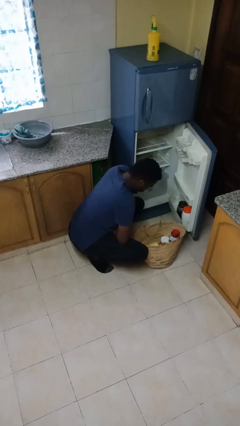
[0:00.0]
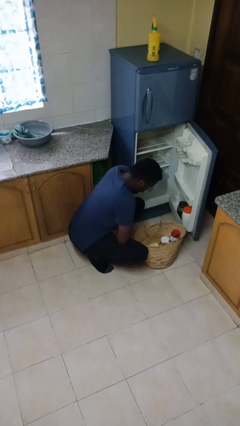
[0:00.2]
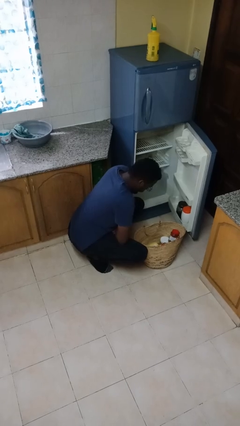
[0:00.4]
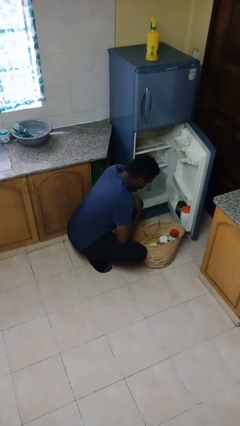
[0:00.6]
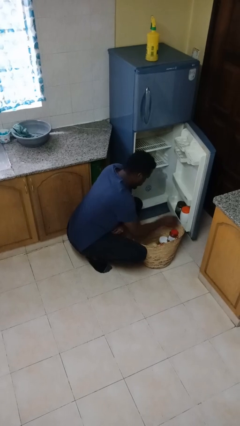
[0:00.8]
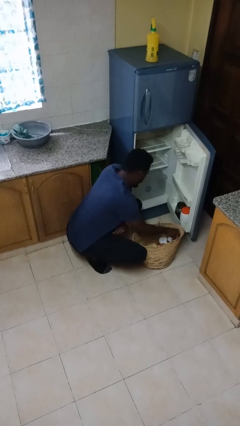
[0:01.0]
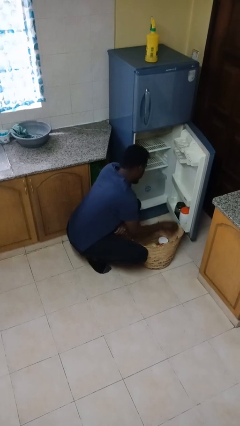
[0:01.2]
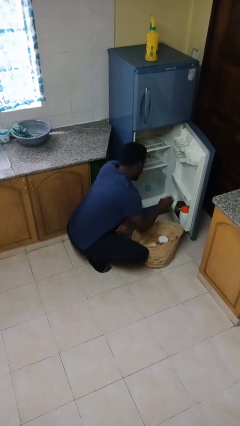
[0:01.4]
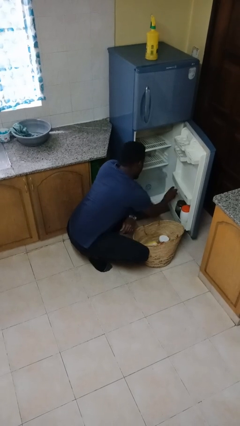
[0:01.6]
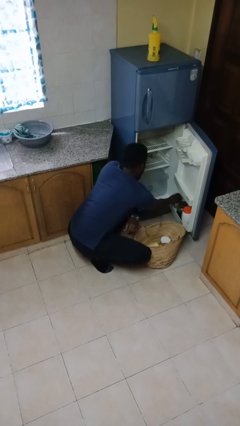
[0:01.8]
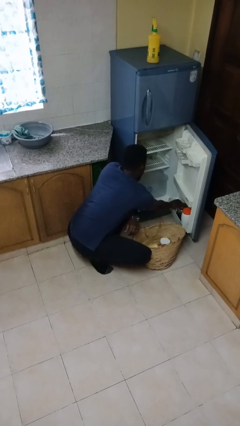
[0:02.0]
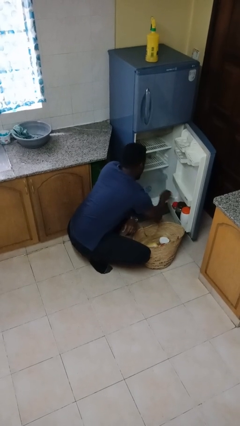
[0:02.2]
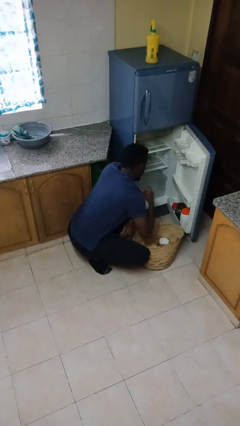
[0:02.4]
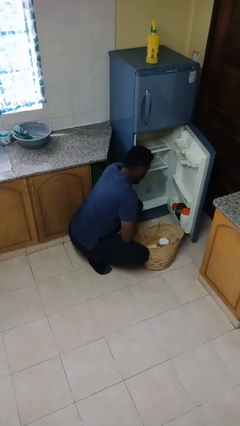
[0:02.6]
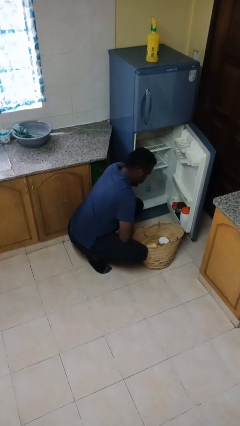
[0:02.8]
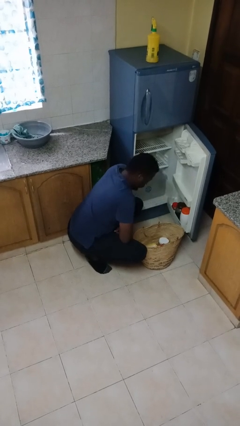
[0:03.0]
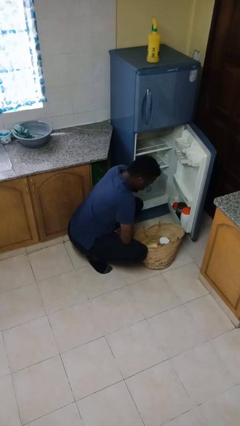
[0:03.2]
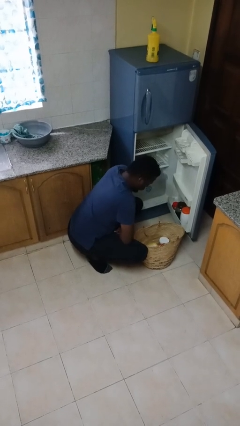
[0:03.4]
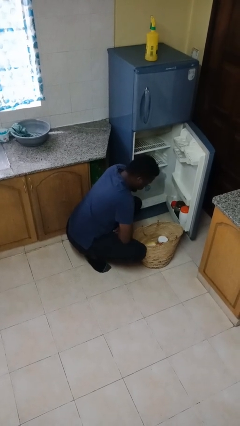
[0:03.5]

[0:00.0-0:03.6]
person loads groceries into refrigerator

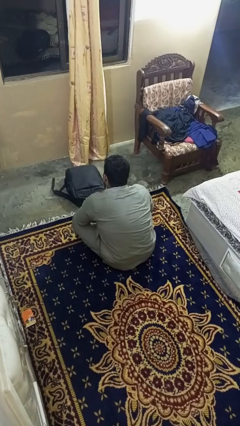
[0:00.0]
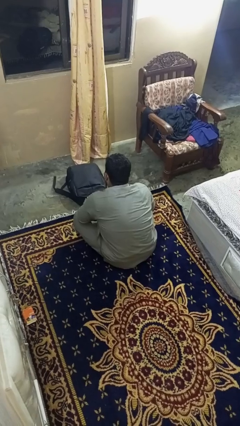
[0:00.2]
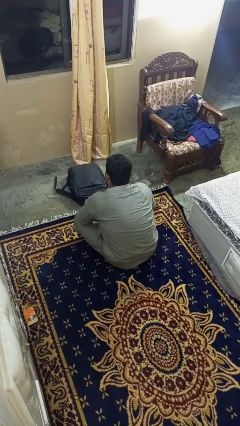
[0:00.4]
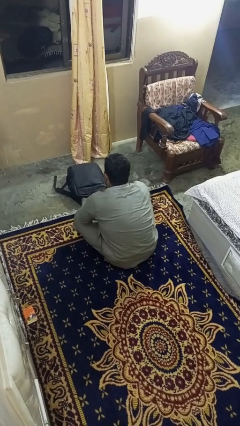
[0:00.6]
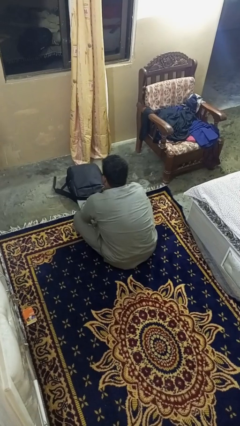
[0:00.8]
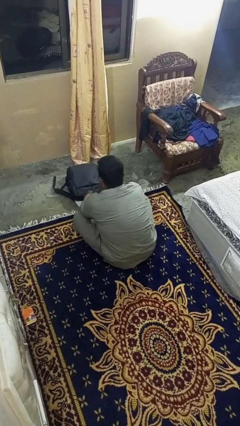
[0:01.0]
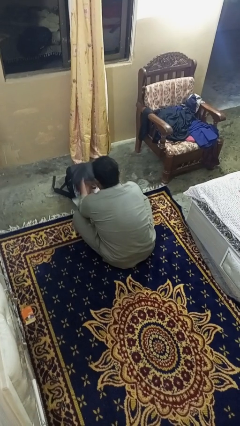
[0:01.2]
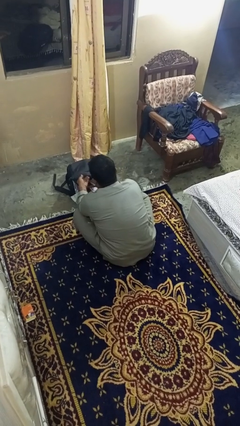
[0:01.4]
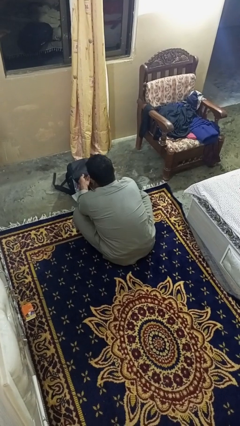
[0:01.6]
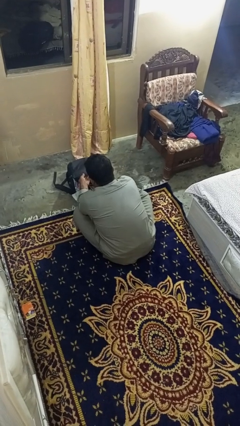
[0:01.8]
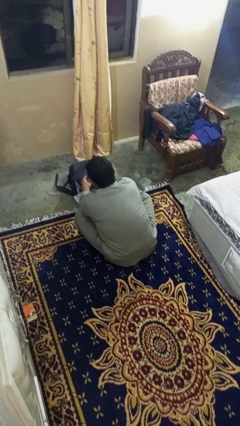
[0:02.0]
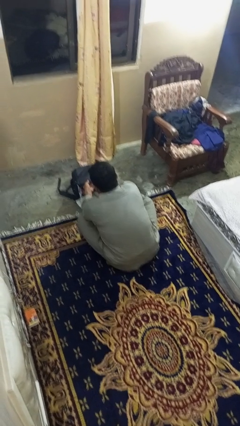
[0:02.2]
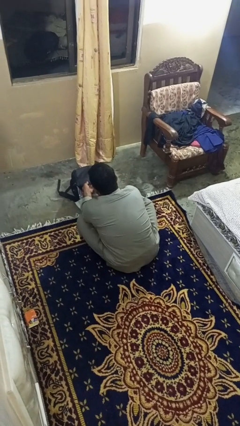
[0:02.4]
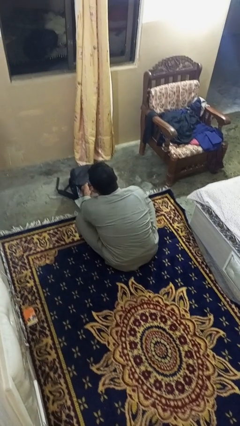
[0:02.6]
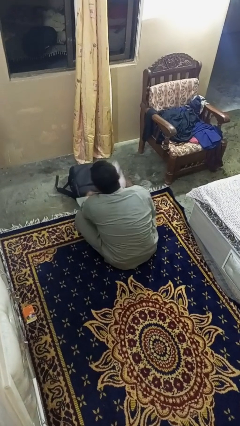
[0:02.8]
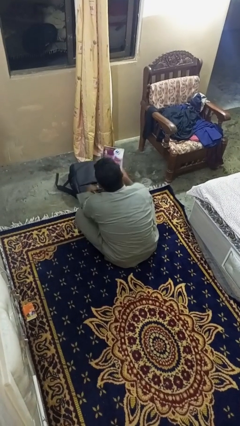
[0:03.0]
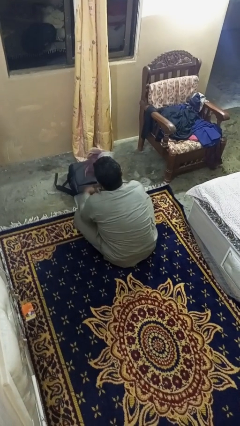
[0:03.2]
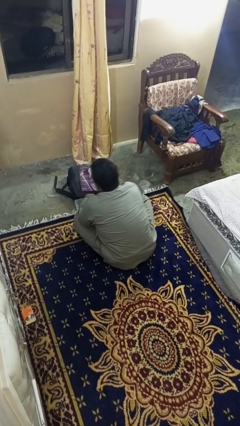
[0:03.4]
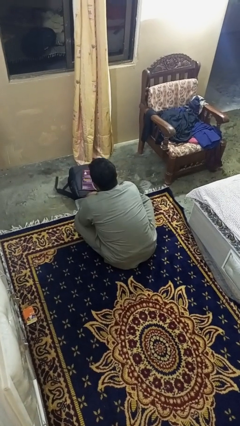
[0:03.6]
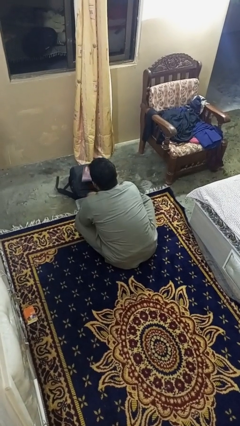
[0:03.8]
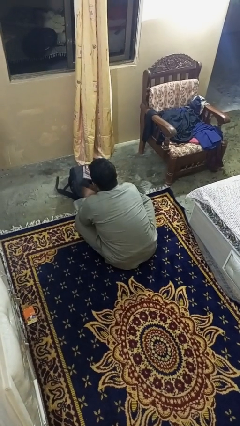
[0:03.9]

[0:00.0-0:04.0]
person takes object from bag

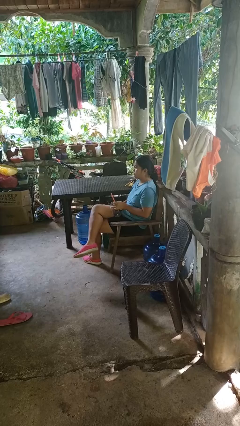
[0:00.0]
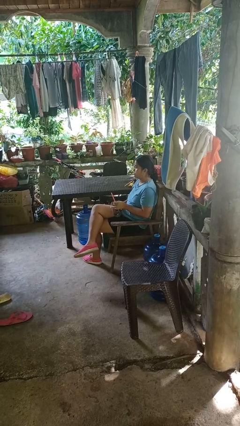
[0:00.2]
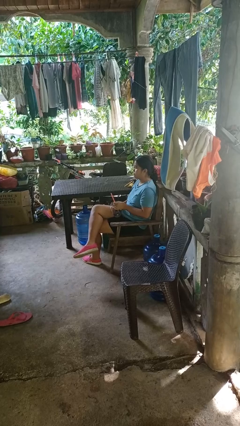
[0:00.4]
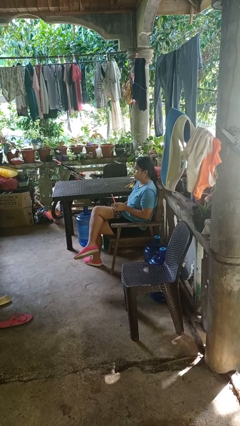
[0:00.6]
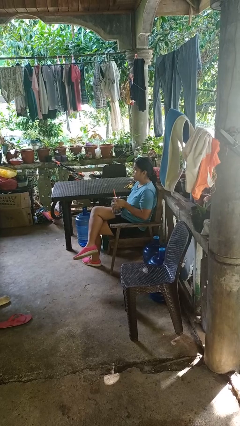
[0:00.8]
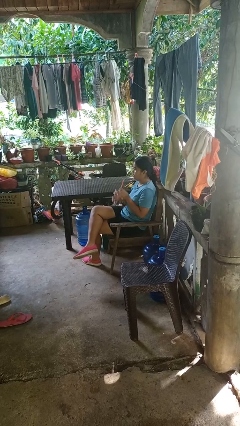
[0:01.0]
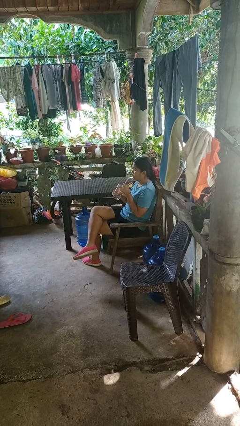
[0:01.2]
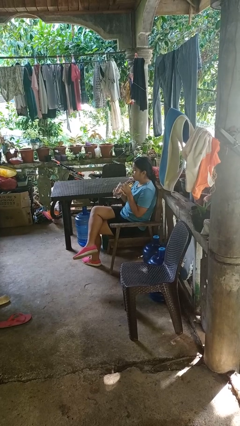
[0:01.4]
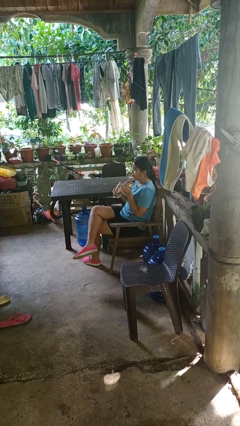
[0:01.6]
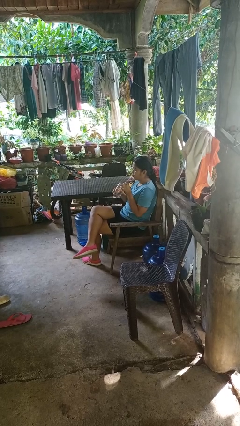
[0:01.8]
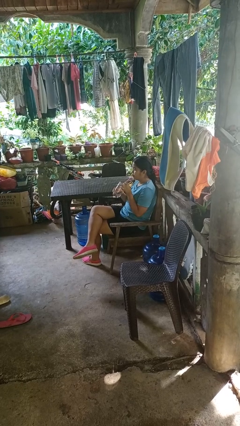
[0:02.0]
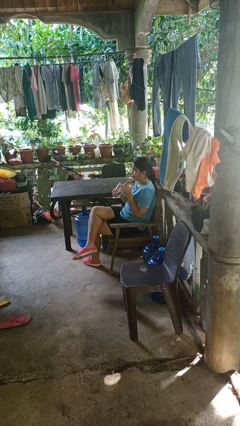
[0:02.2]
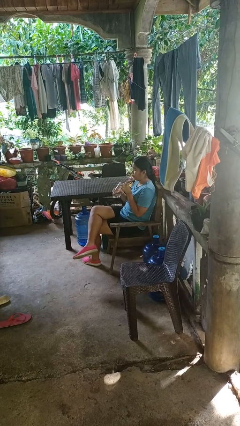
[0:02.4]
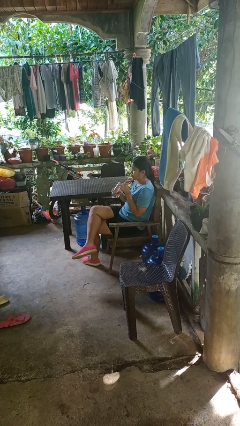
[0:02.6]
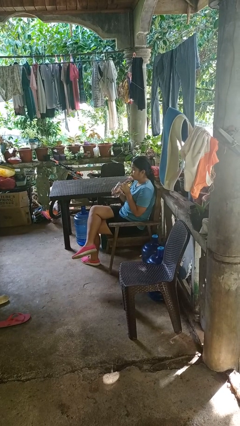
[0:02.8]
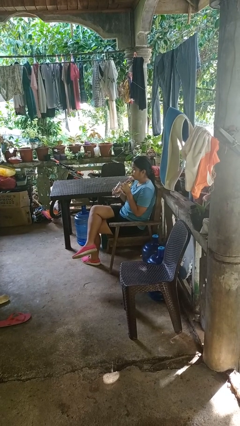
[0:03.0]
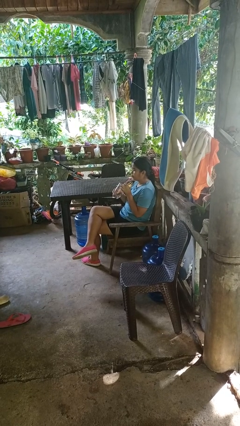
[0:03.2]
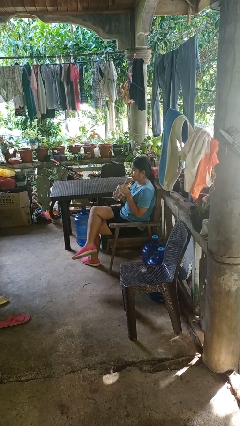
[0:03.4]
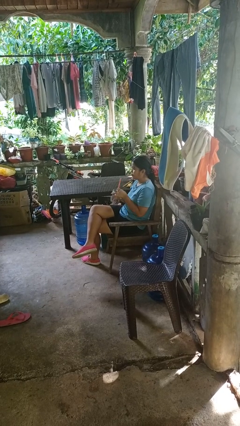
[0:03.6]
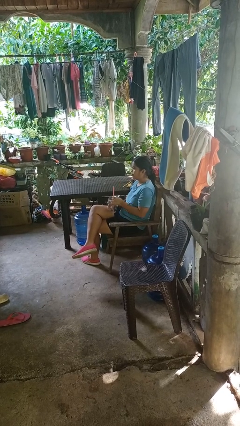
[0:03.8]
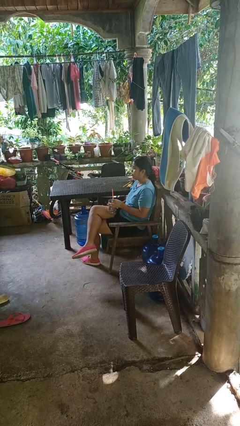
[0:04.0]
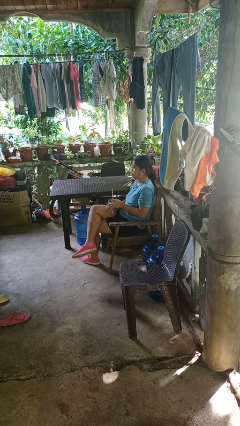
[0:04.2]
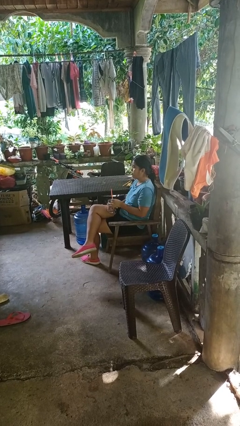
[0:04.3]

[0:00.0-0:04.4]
person drinks from straw

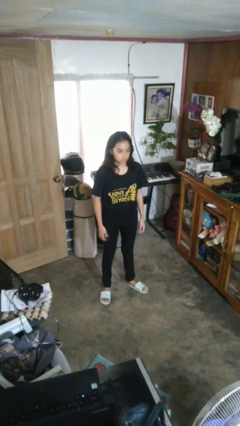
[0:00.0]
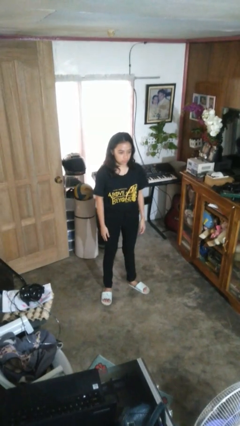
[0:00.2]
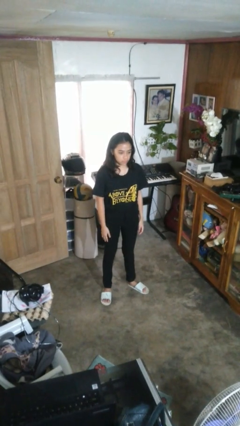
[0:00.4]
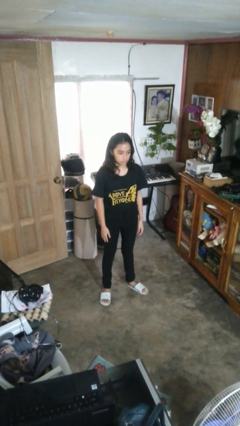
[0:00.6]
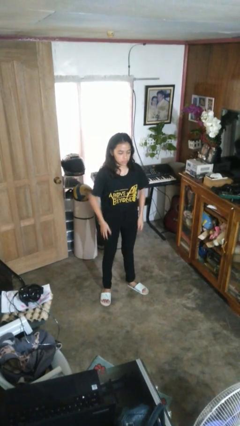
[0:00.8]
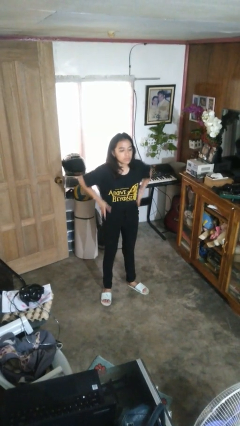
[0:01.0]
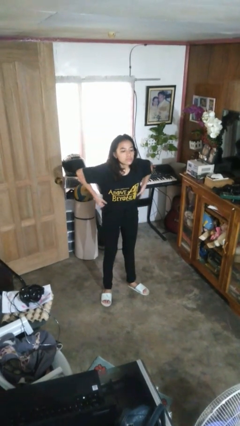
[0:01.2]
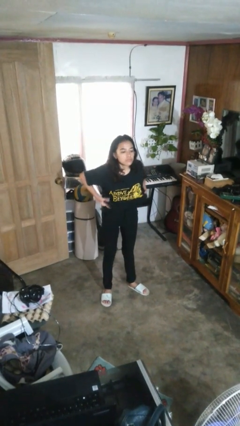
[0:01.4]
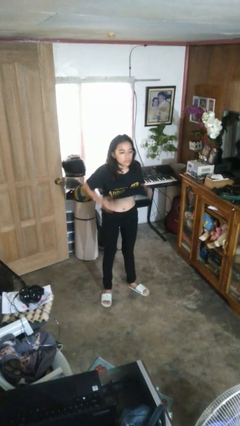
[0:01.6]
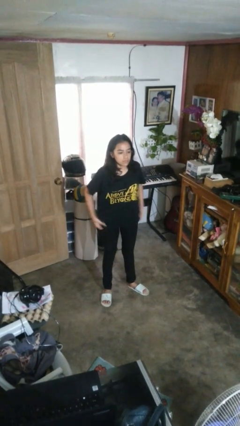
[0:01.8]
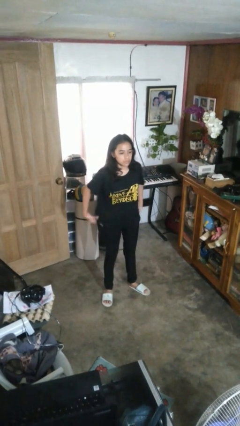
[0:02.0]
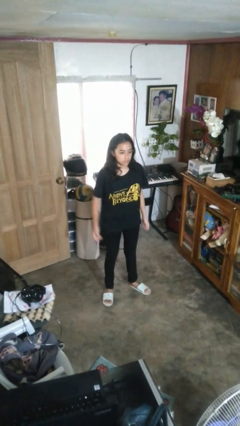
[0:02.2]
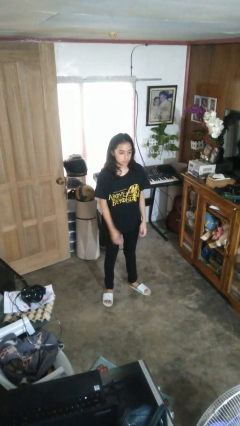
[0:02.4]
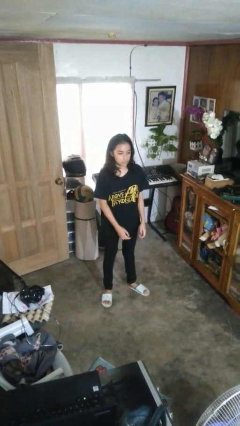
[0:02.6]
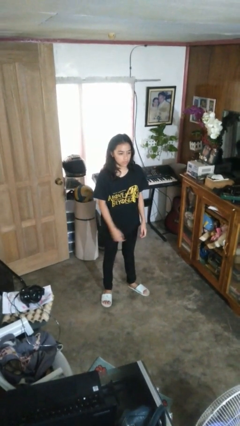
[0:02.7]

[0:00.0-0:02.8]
person untucks shirt

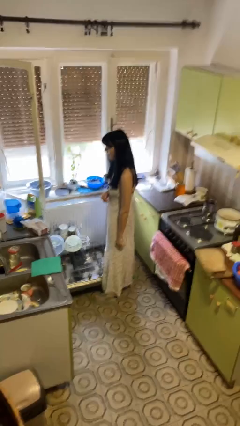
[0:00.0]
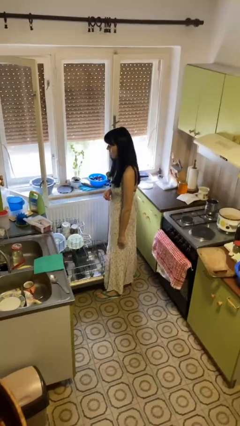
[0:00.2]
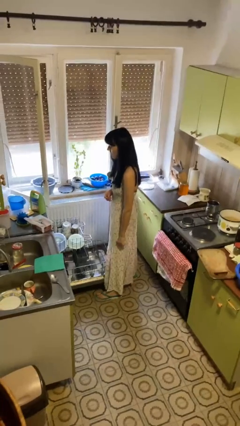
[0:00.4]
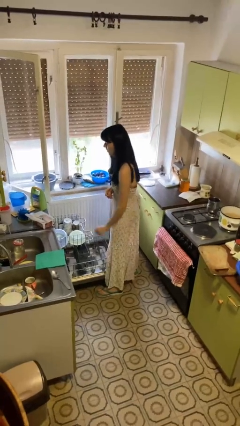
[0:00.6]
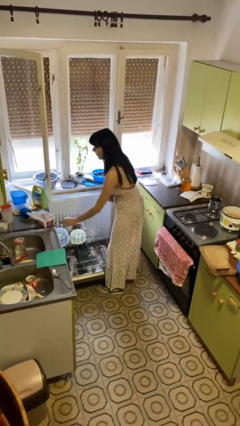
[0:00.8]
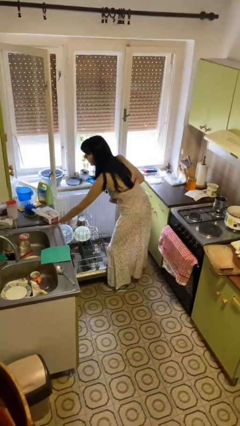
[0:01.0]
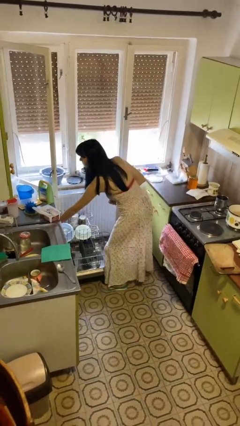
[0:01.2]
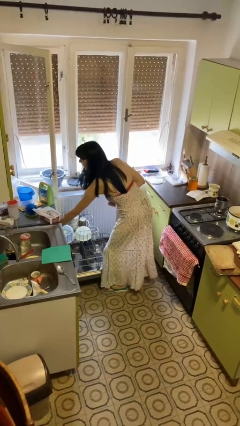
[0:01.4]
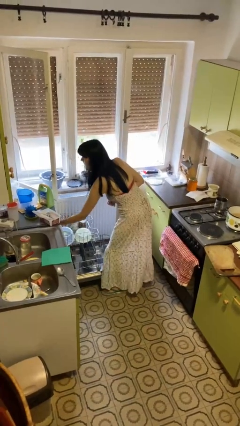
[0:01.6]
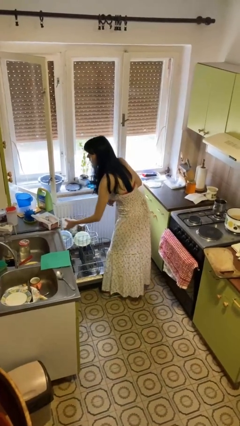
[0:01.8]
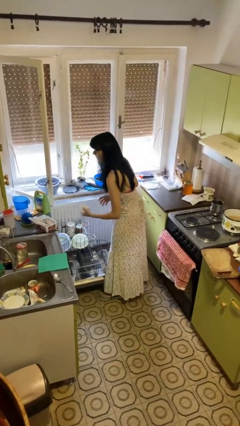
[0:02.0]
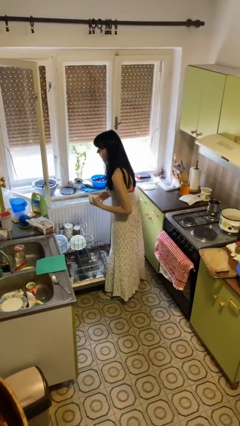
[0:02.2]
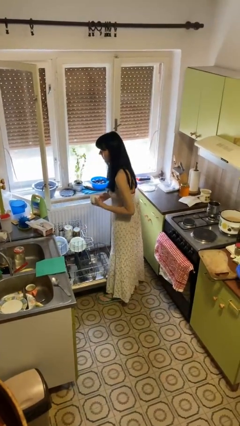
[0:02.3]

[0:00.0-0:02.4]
person unloads dishwasher

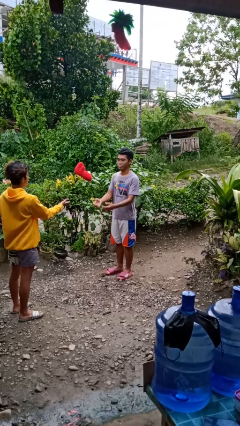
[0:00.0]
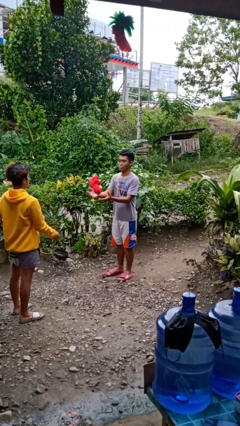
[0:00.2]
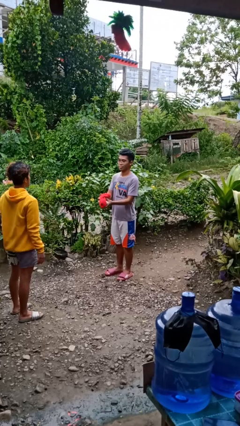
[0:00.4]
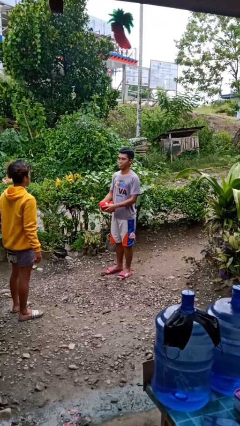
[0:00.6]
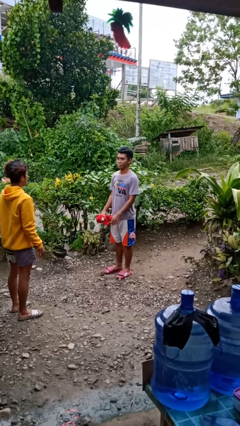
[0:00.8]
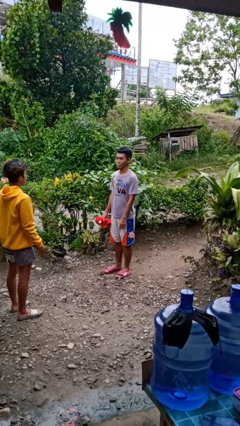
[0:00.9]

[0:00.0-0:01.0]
person catches object from person
